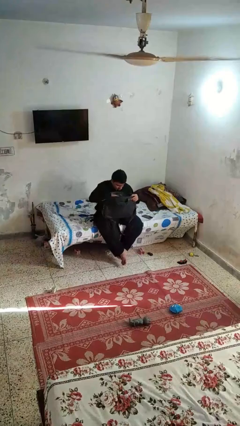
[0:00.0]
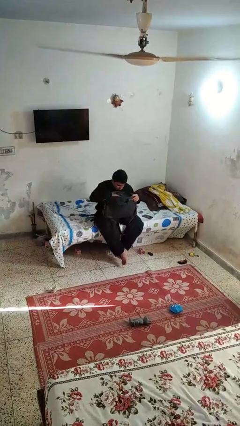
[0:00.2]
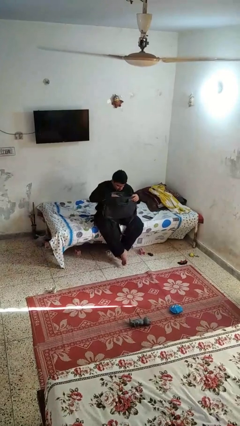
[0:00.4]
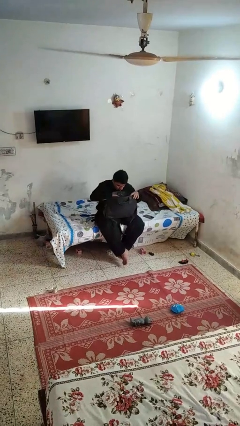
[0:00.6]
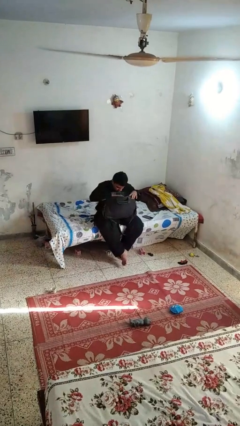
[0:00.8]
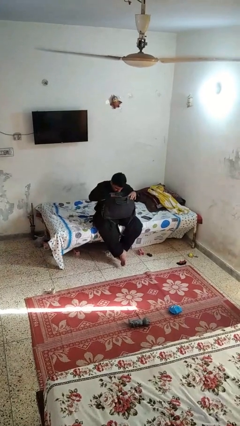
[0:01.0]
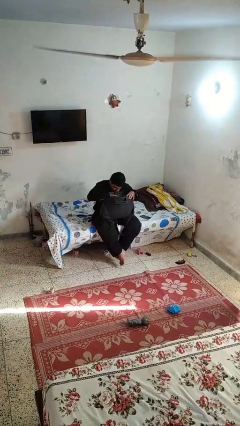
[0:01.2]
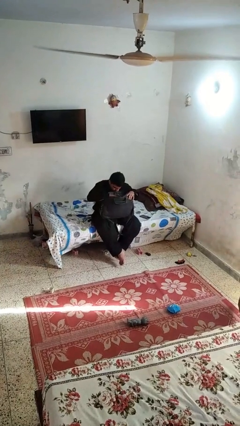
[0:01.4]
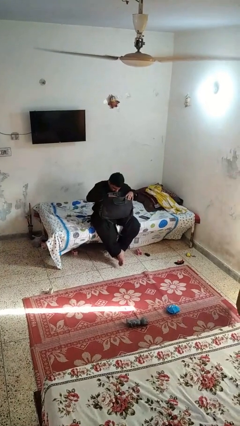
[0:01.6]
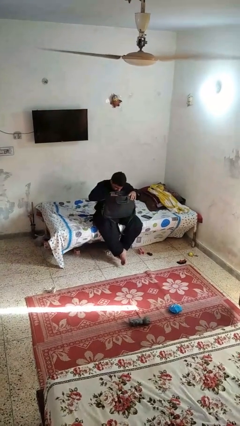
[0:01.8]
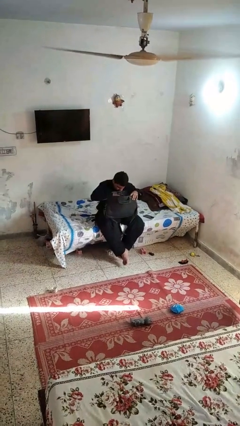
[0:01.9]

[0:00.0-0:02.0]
person searches in backpack

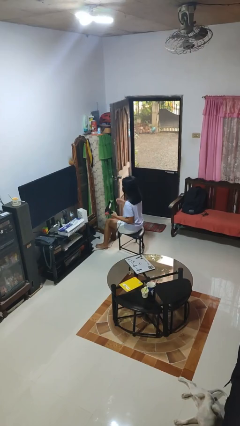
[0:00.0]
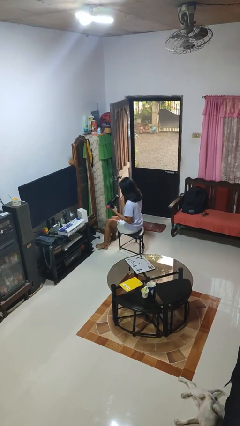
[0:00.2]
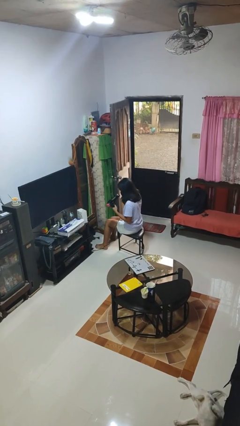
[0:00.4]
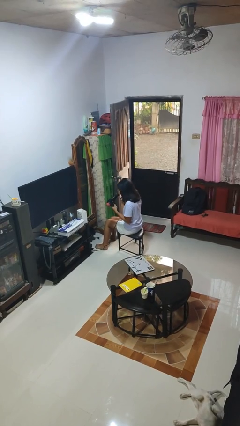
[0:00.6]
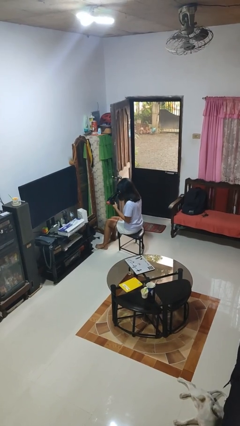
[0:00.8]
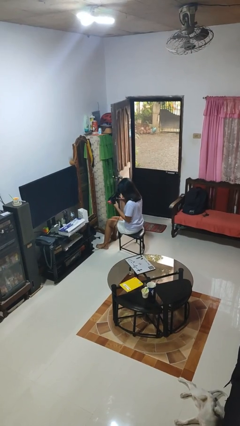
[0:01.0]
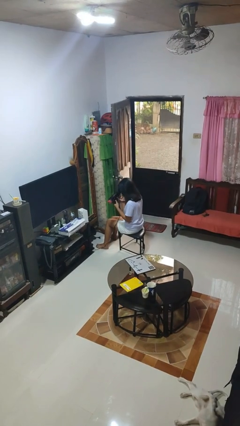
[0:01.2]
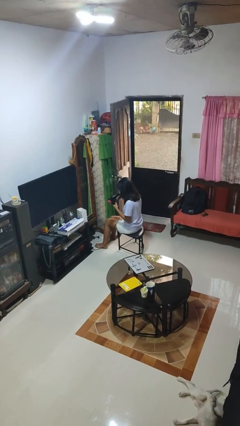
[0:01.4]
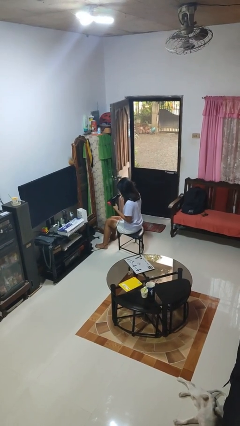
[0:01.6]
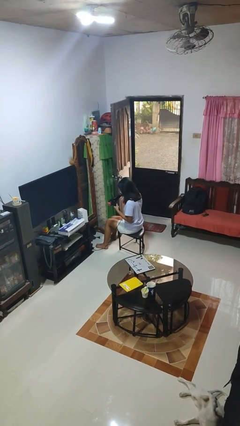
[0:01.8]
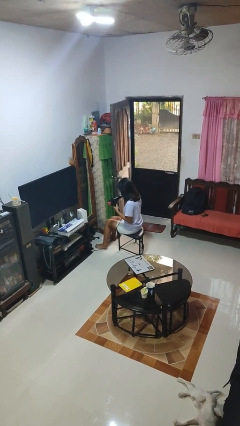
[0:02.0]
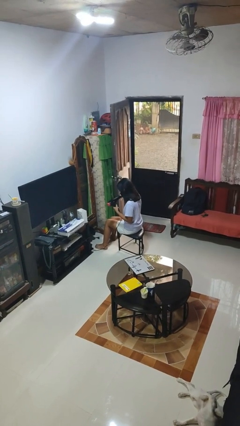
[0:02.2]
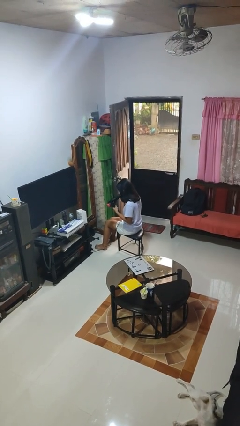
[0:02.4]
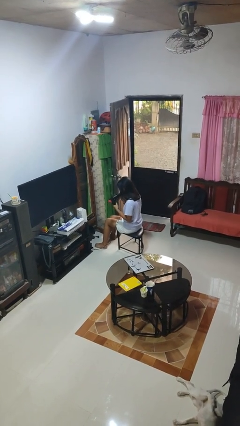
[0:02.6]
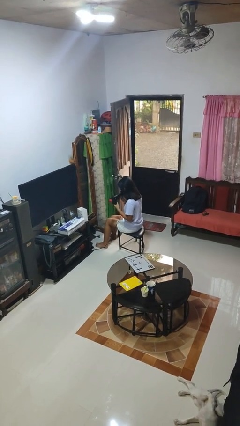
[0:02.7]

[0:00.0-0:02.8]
person dries hair with hairdryer

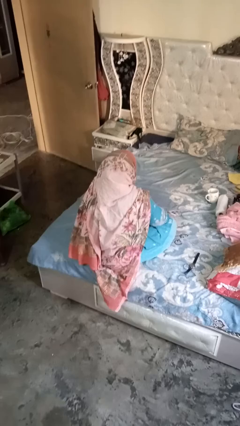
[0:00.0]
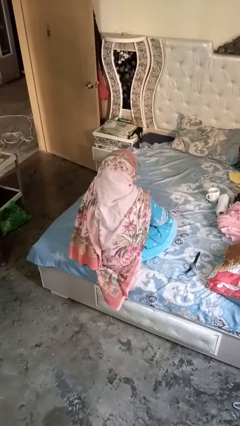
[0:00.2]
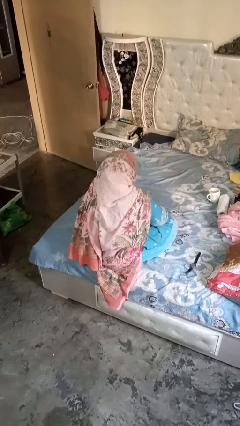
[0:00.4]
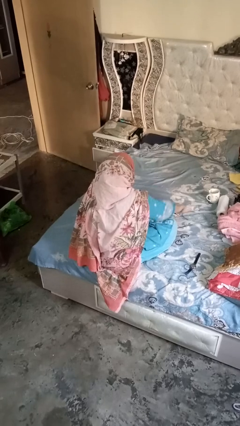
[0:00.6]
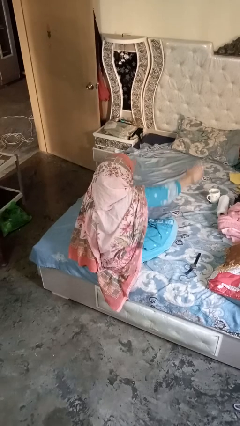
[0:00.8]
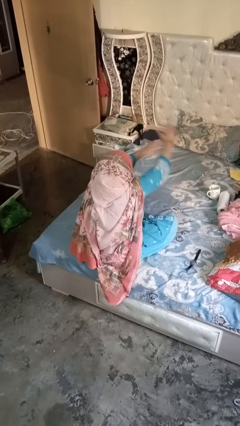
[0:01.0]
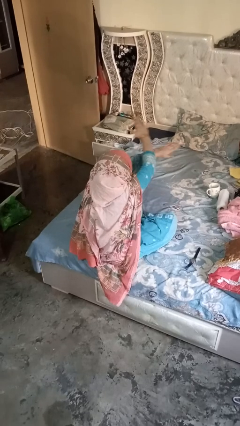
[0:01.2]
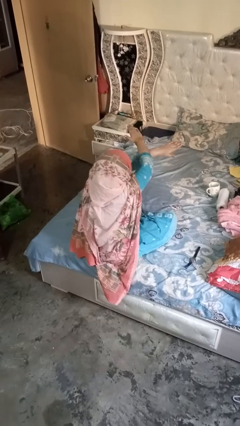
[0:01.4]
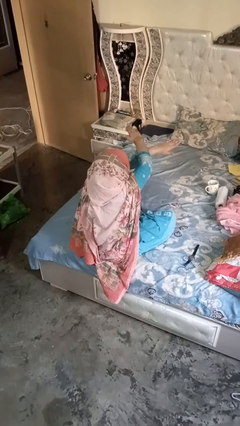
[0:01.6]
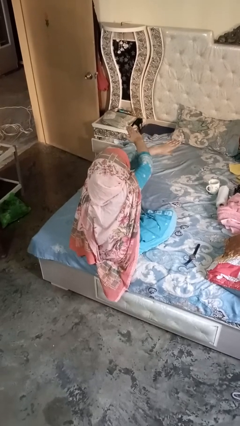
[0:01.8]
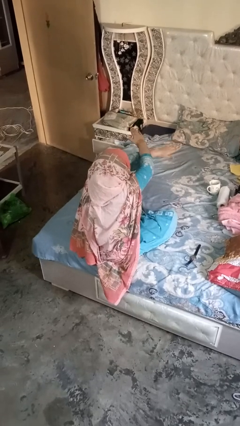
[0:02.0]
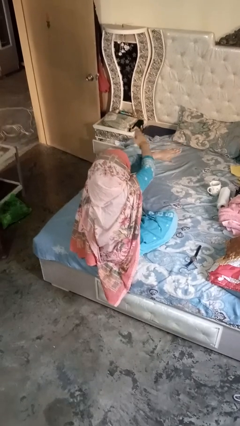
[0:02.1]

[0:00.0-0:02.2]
person gestures arms x

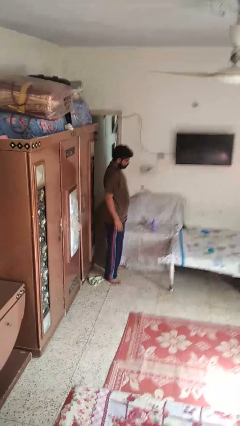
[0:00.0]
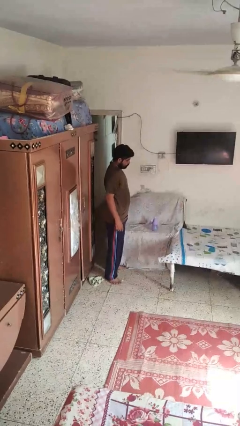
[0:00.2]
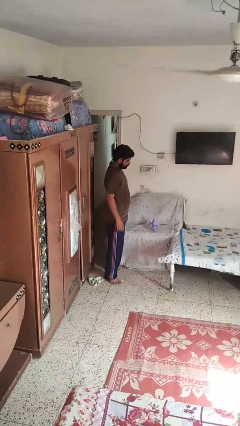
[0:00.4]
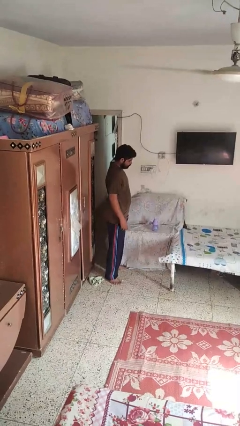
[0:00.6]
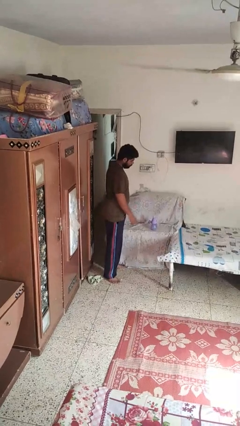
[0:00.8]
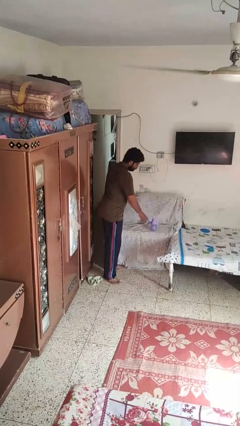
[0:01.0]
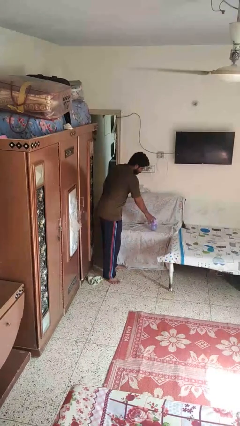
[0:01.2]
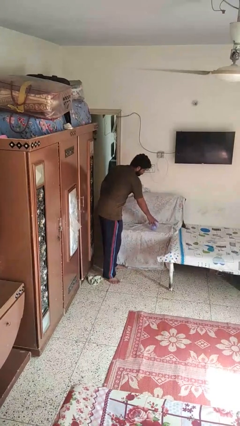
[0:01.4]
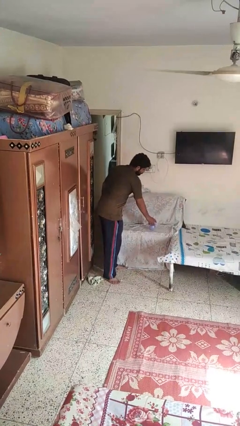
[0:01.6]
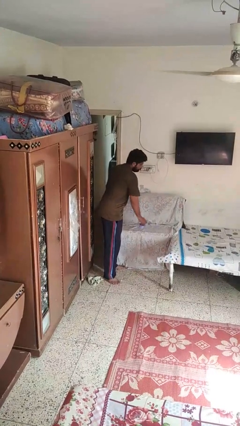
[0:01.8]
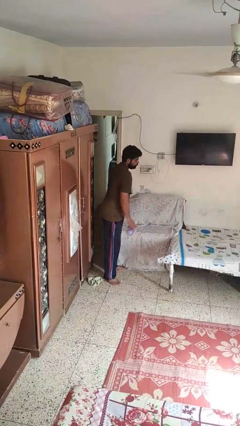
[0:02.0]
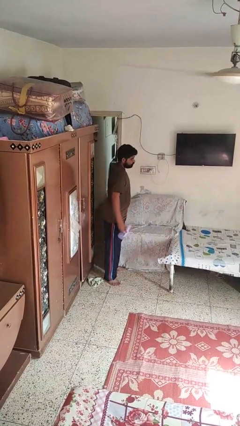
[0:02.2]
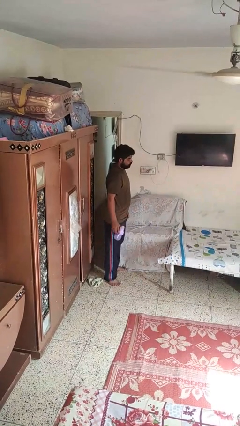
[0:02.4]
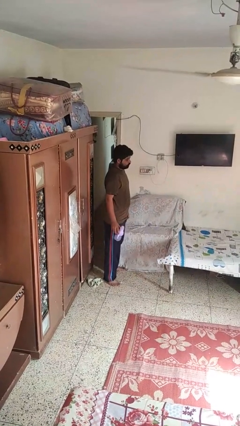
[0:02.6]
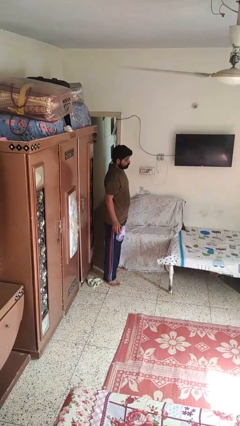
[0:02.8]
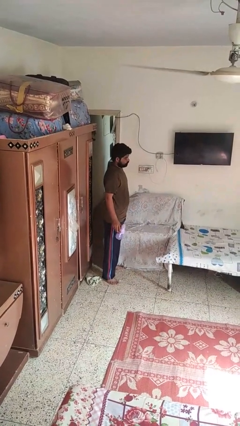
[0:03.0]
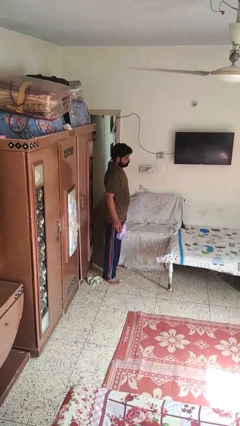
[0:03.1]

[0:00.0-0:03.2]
person picks up object from couch

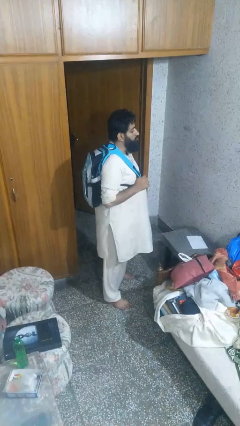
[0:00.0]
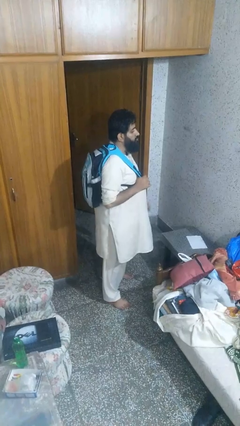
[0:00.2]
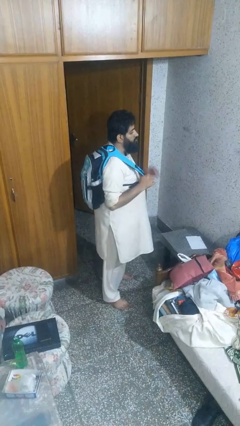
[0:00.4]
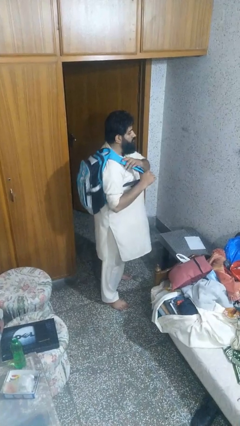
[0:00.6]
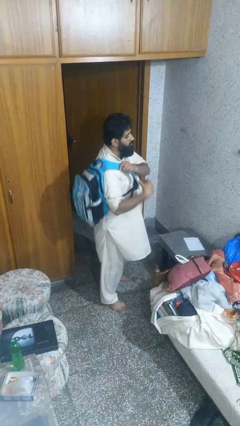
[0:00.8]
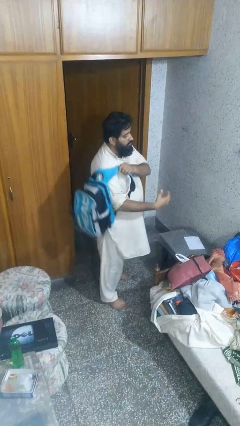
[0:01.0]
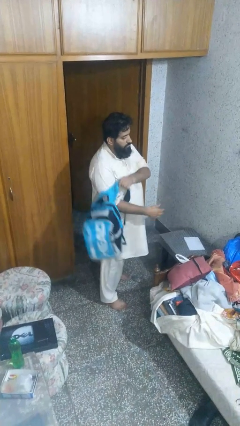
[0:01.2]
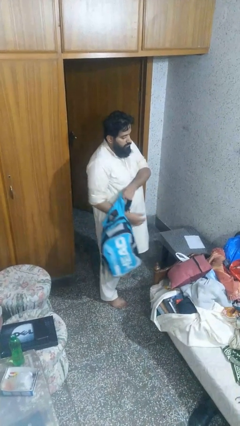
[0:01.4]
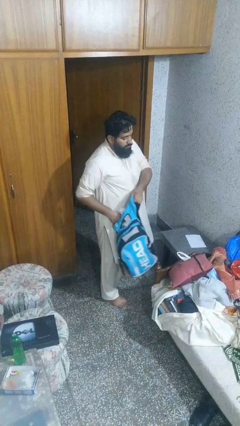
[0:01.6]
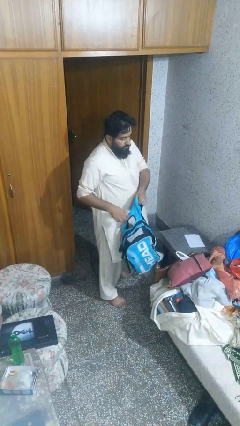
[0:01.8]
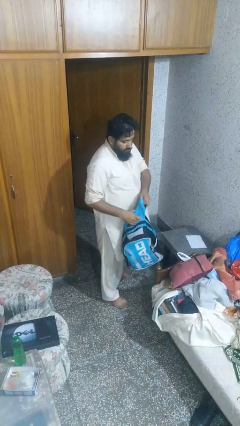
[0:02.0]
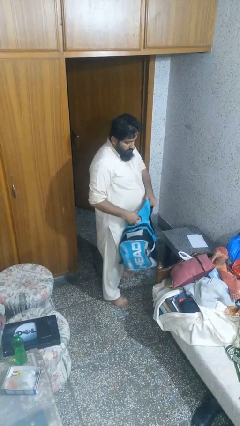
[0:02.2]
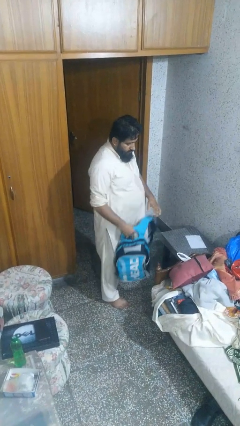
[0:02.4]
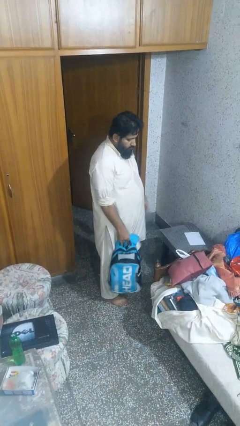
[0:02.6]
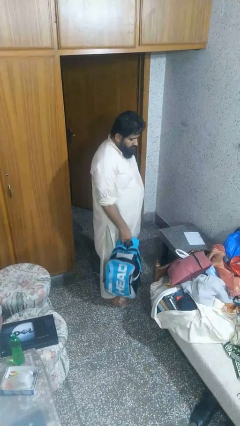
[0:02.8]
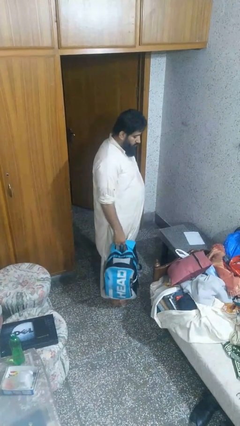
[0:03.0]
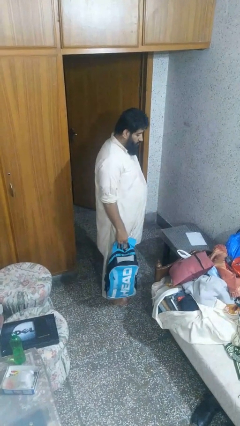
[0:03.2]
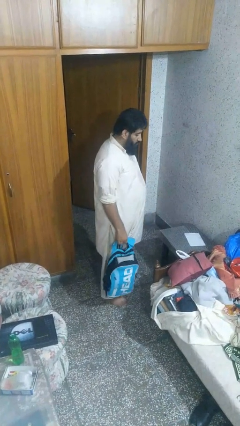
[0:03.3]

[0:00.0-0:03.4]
person takes off backpack

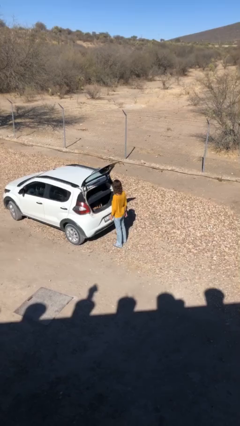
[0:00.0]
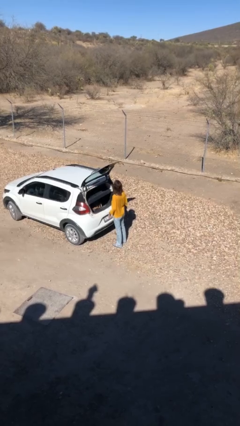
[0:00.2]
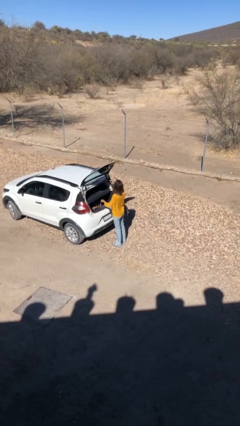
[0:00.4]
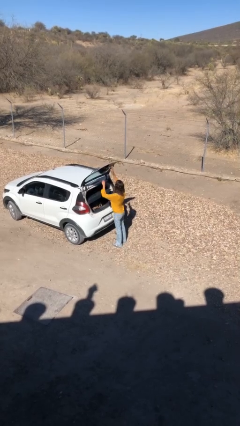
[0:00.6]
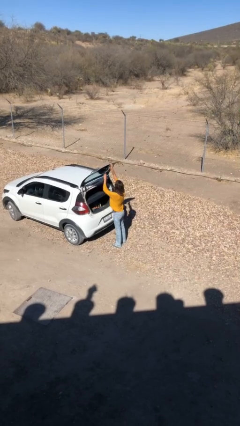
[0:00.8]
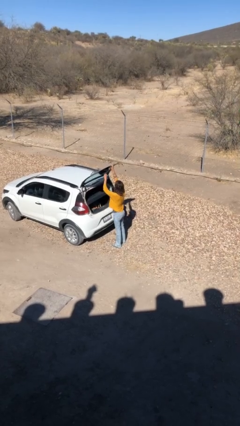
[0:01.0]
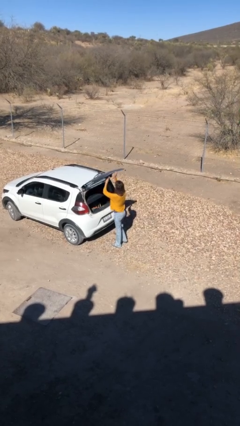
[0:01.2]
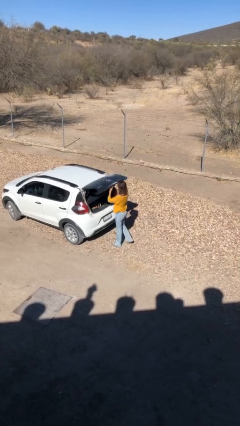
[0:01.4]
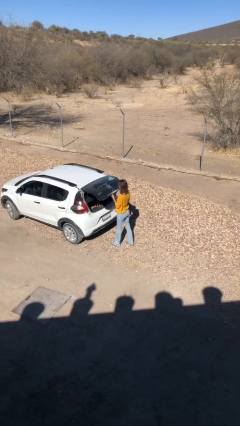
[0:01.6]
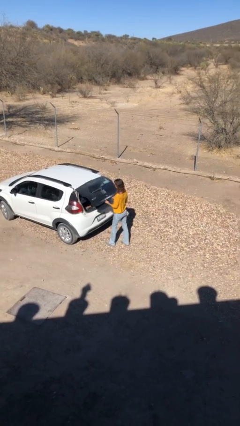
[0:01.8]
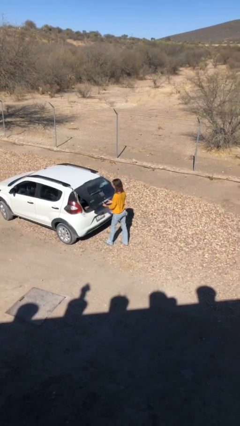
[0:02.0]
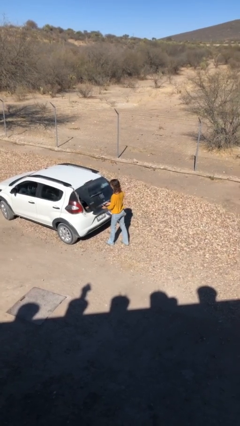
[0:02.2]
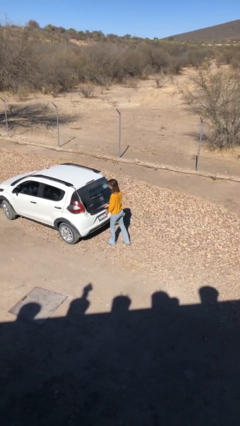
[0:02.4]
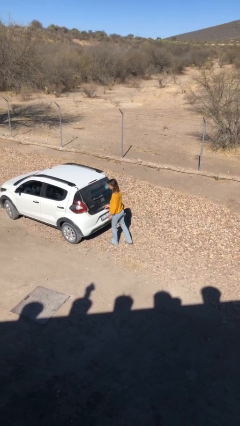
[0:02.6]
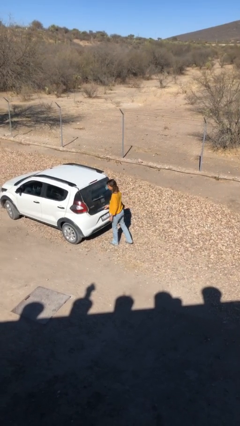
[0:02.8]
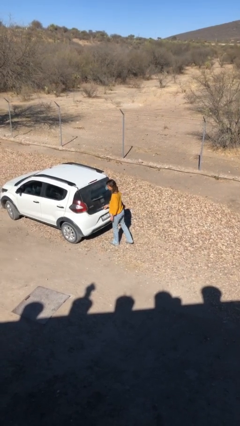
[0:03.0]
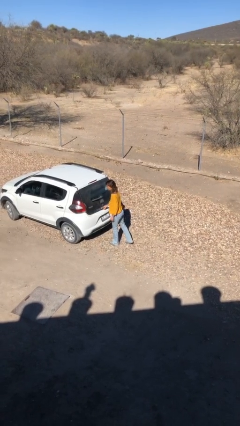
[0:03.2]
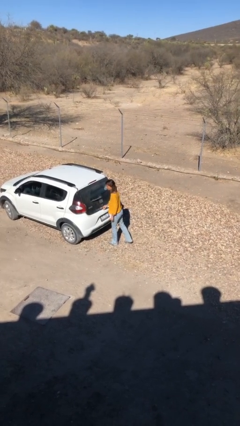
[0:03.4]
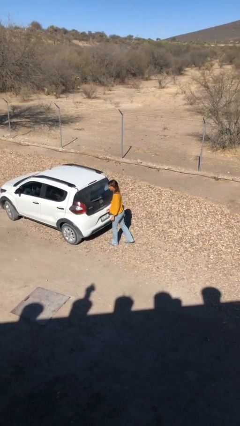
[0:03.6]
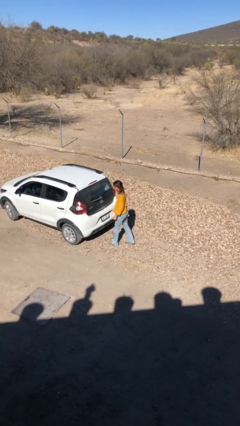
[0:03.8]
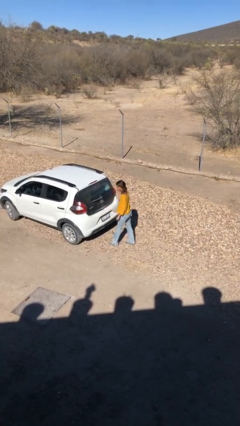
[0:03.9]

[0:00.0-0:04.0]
person closes car trunk
